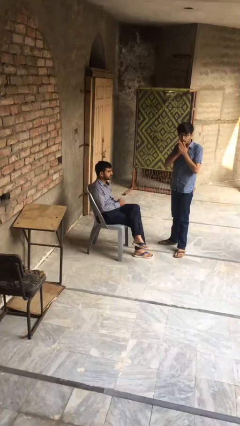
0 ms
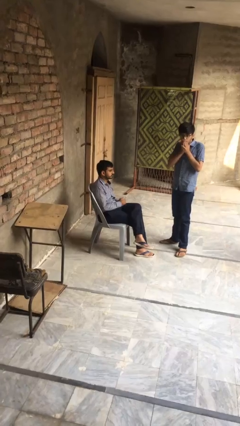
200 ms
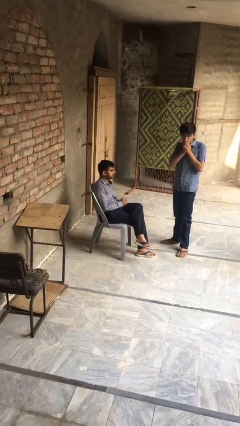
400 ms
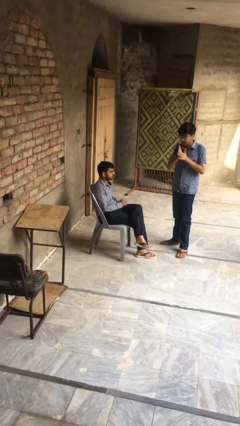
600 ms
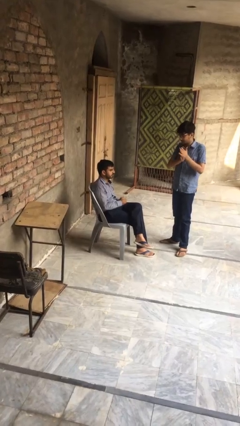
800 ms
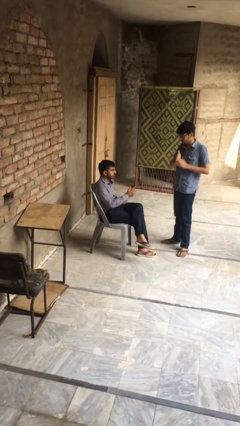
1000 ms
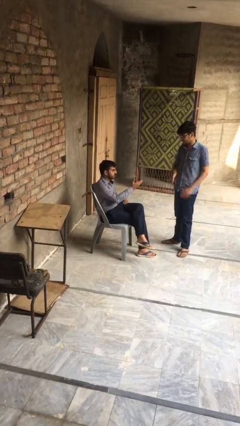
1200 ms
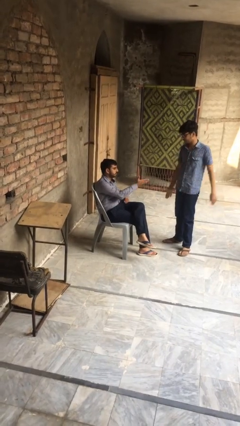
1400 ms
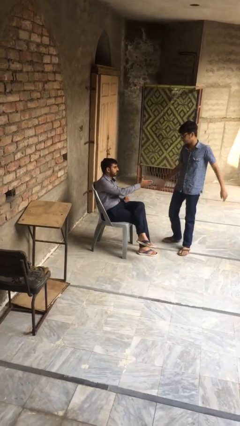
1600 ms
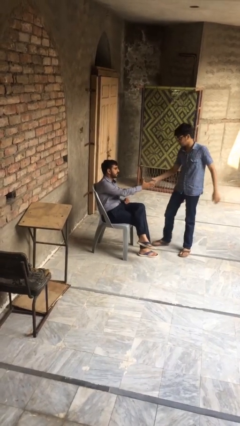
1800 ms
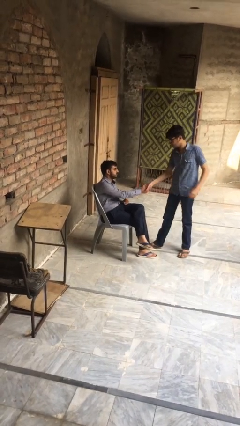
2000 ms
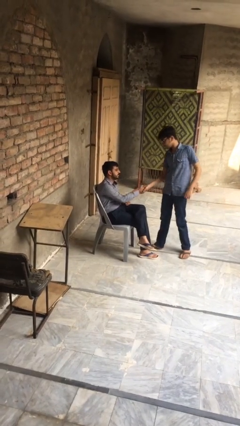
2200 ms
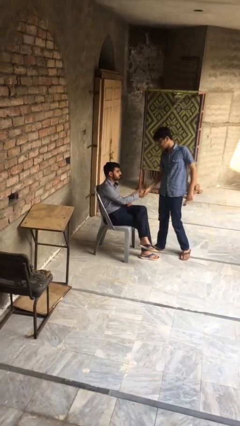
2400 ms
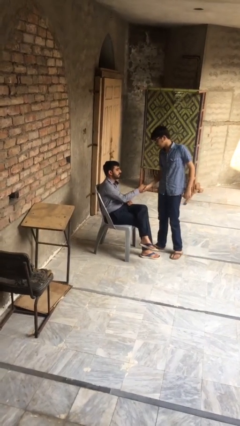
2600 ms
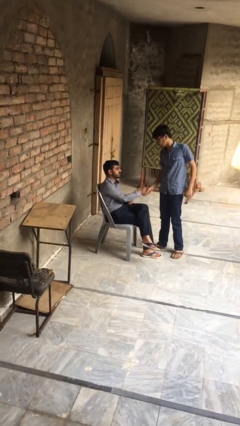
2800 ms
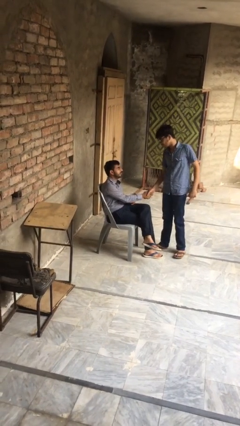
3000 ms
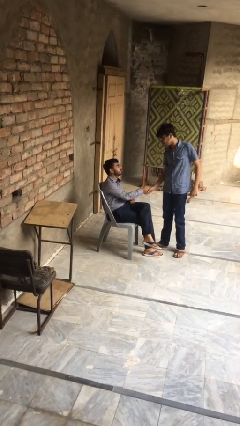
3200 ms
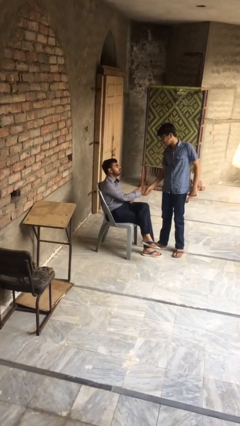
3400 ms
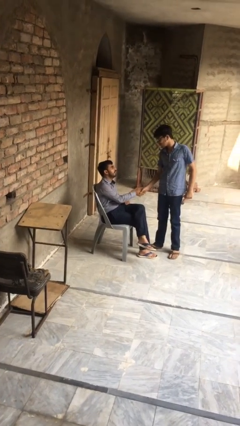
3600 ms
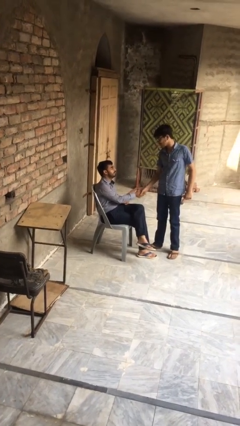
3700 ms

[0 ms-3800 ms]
person shakes hand

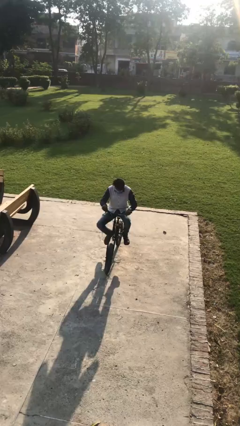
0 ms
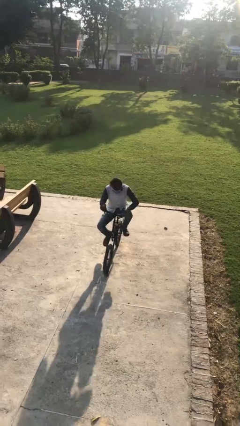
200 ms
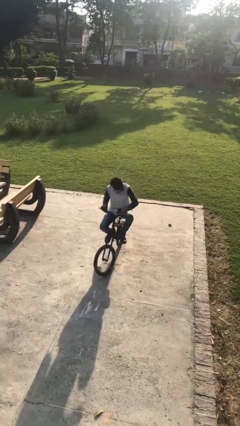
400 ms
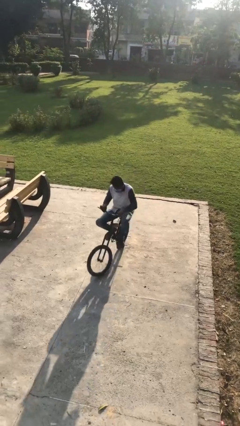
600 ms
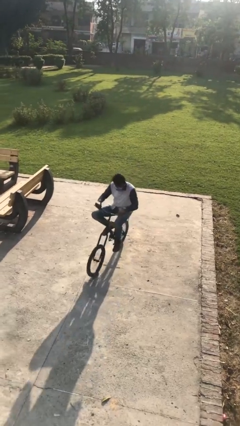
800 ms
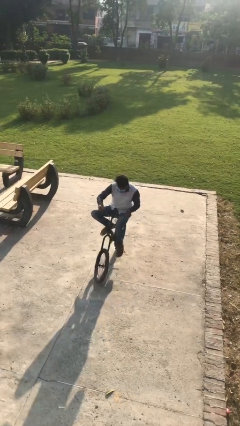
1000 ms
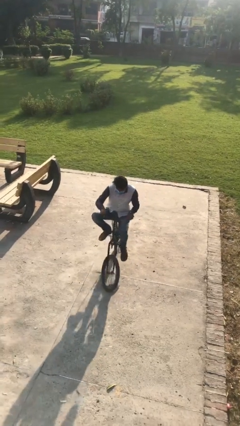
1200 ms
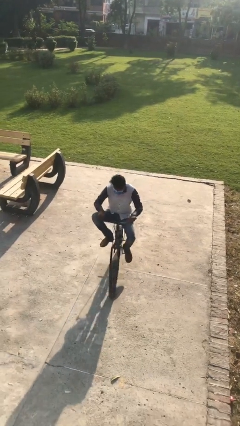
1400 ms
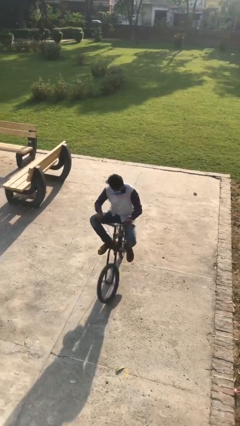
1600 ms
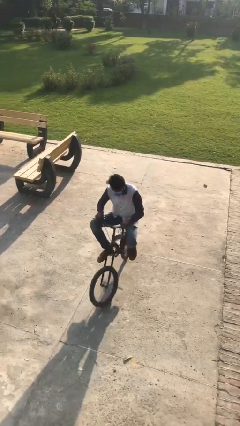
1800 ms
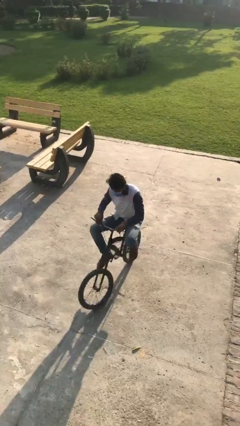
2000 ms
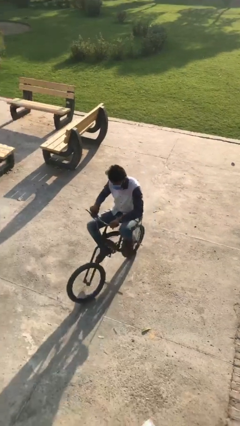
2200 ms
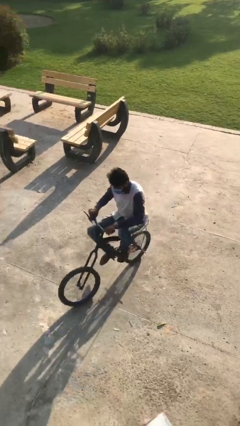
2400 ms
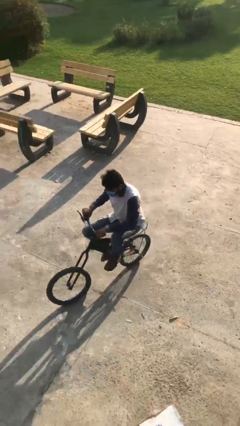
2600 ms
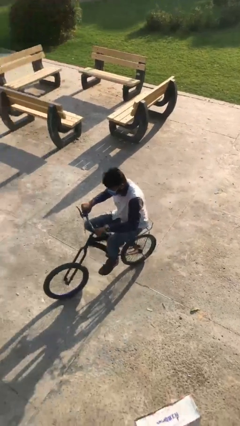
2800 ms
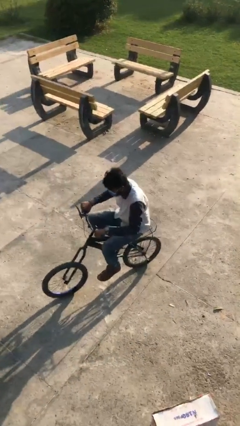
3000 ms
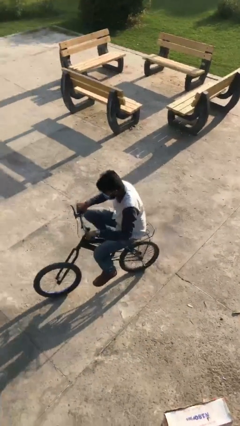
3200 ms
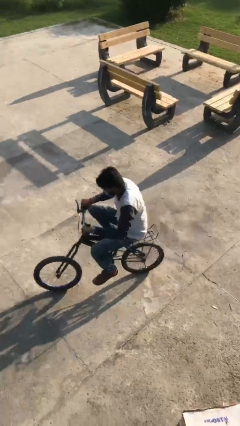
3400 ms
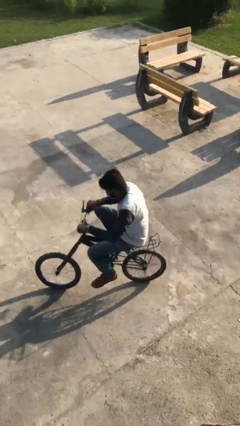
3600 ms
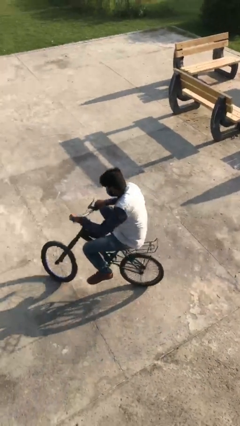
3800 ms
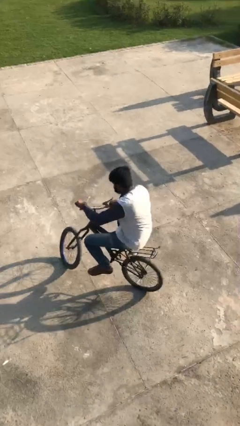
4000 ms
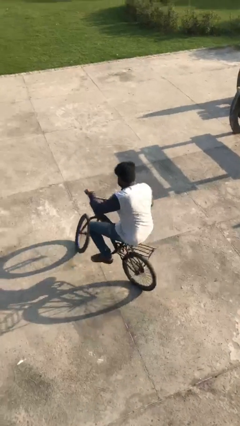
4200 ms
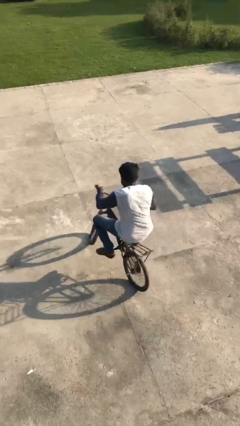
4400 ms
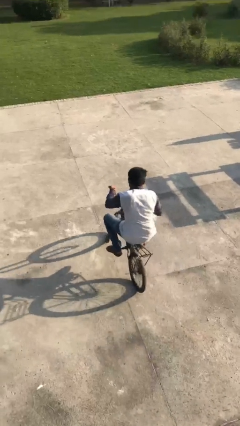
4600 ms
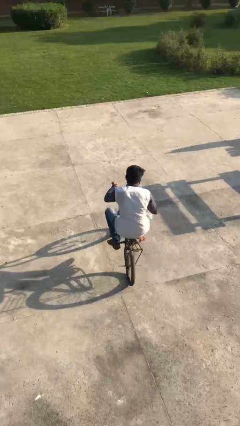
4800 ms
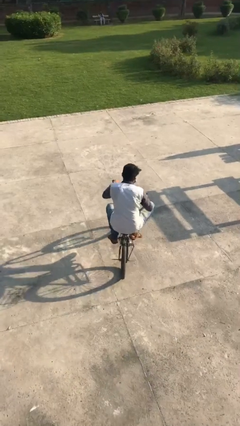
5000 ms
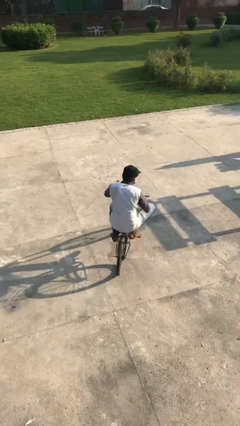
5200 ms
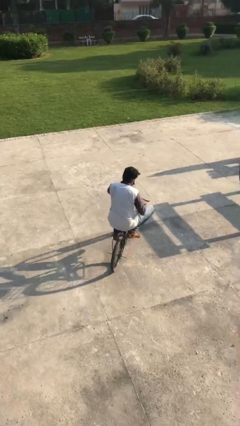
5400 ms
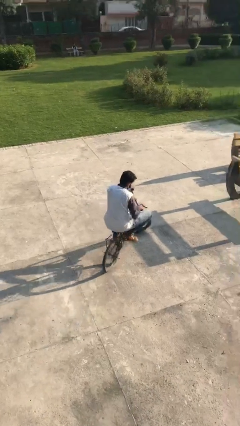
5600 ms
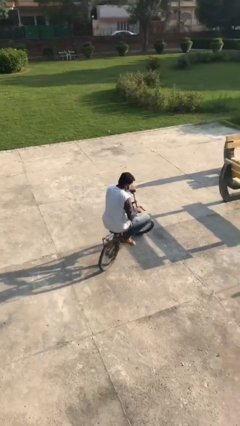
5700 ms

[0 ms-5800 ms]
person rides bicycle

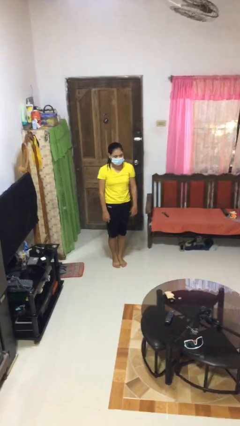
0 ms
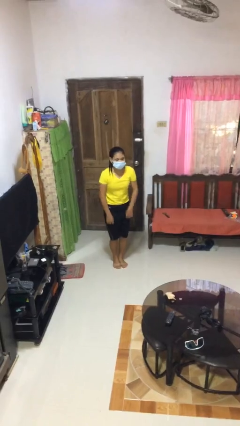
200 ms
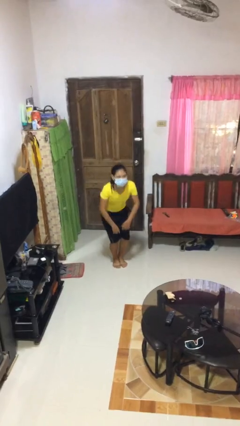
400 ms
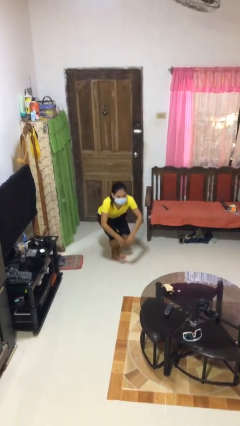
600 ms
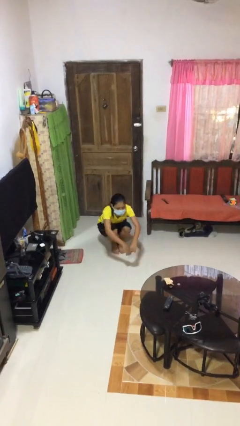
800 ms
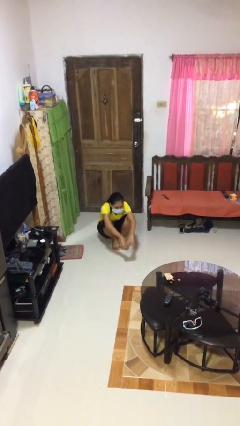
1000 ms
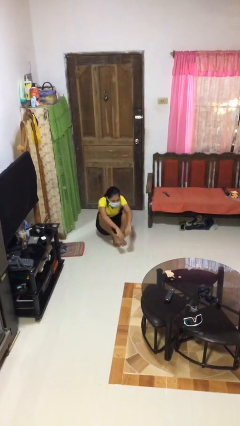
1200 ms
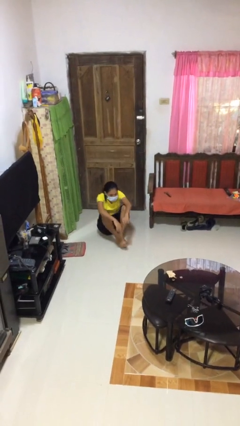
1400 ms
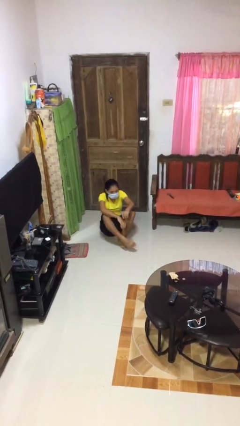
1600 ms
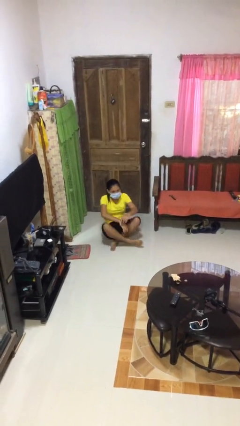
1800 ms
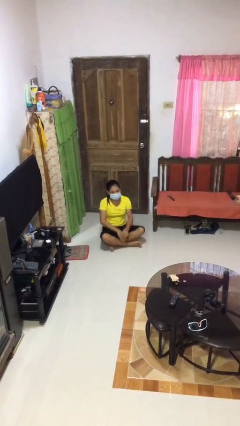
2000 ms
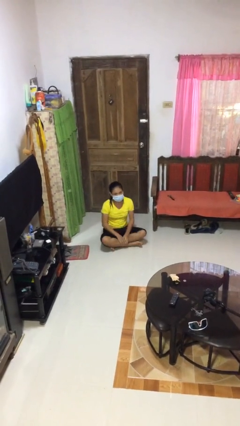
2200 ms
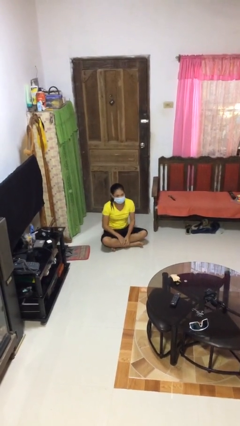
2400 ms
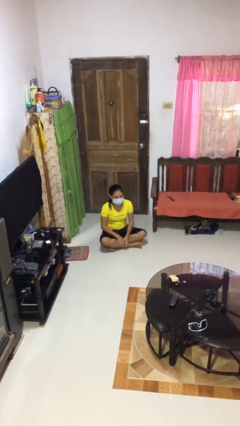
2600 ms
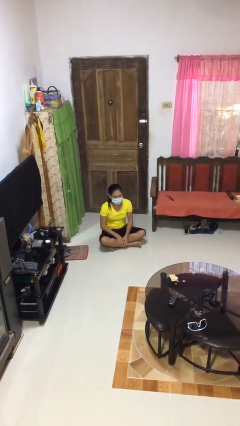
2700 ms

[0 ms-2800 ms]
person sits crisscross

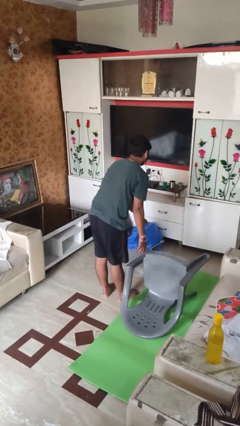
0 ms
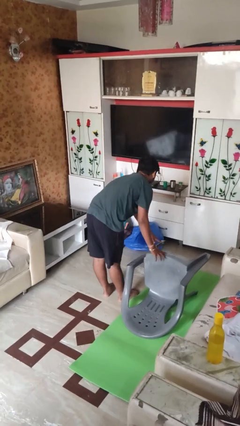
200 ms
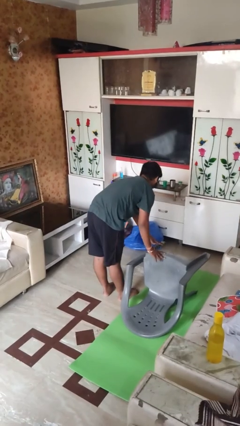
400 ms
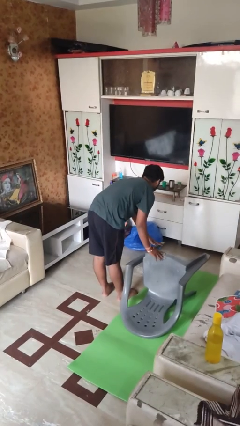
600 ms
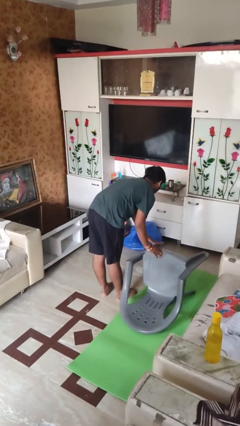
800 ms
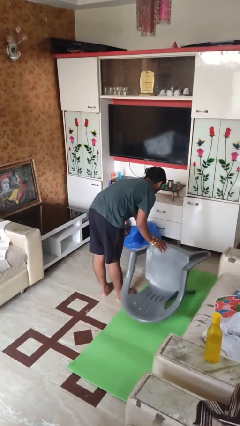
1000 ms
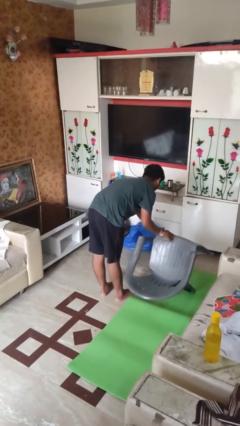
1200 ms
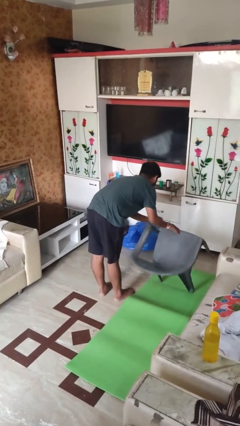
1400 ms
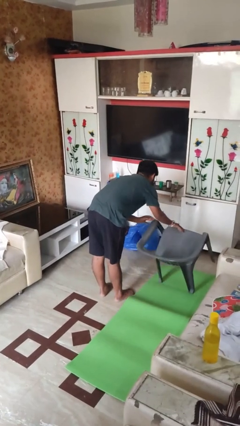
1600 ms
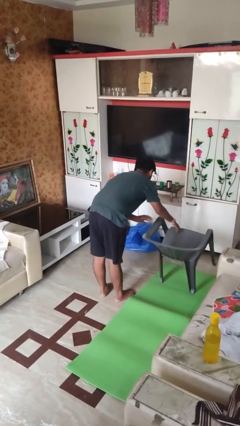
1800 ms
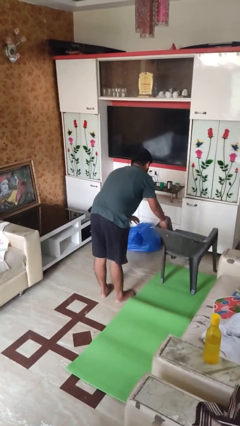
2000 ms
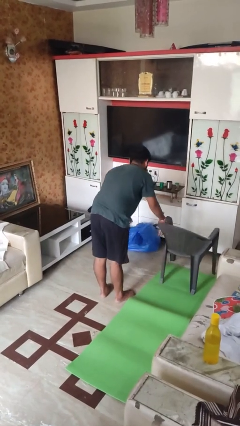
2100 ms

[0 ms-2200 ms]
person sets upright furniture

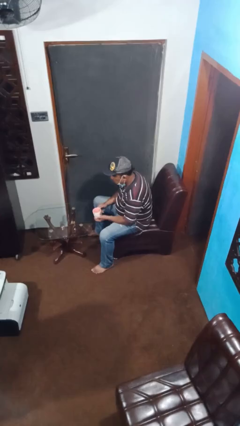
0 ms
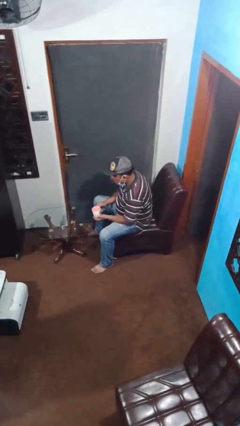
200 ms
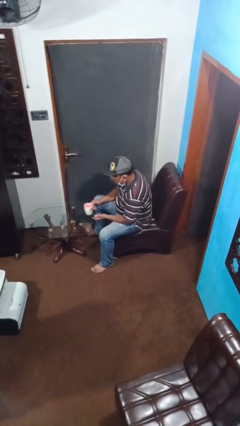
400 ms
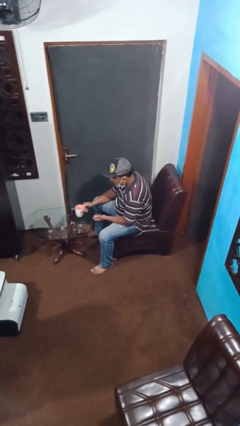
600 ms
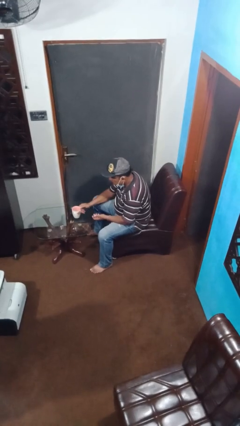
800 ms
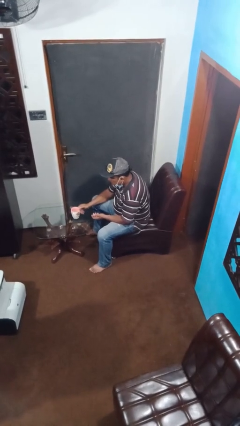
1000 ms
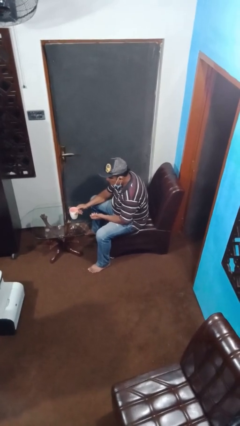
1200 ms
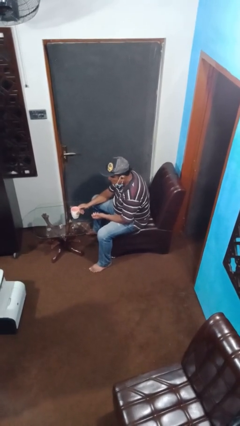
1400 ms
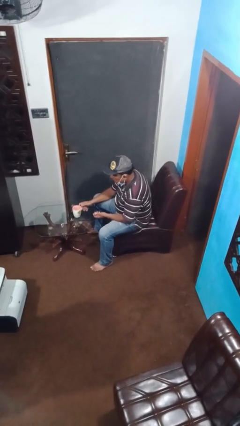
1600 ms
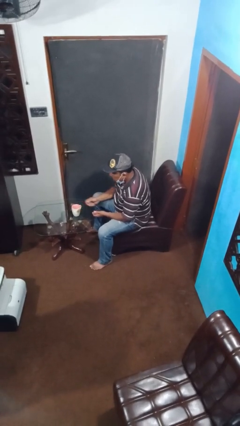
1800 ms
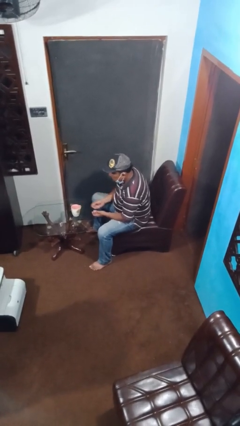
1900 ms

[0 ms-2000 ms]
person puts down object on table

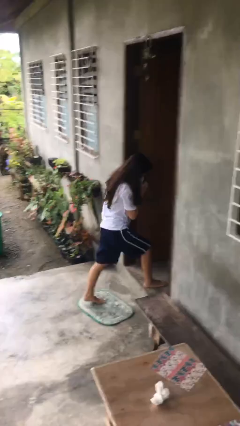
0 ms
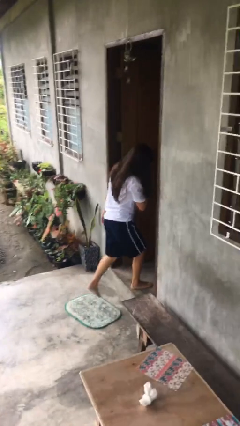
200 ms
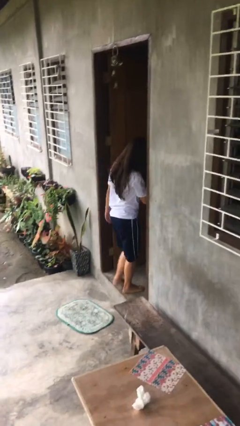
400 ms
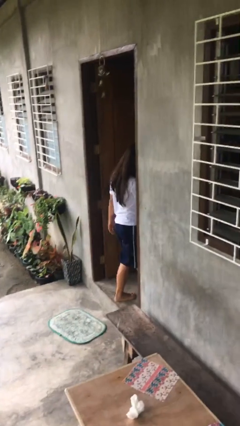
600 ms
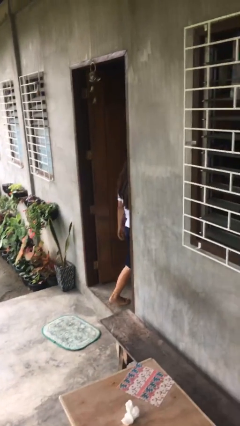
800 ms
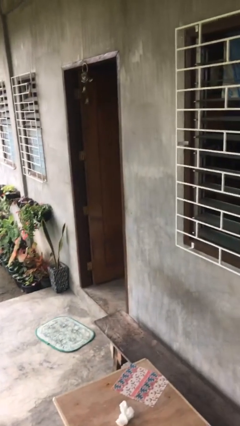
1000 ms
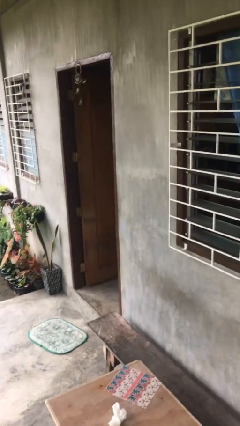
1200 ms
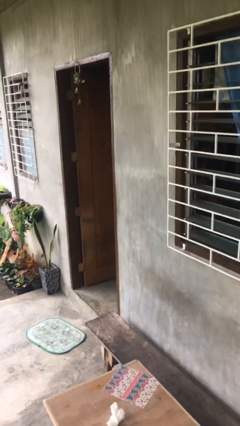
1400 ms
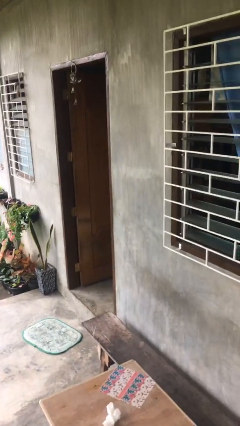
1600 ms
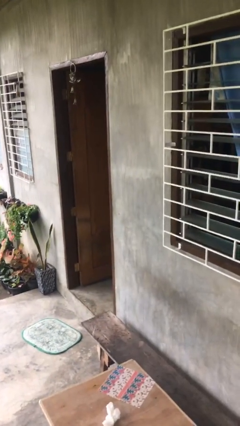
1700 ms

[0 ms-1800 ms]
person exits scene through structure
